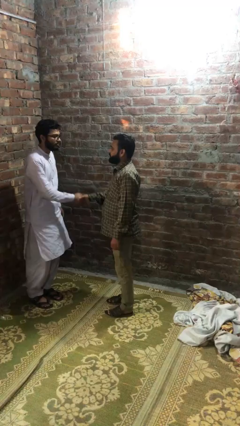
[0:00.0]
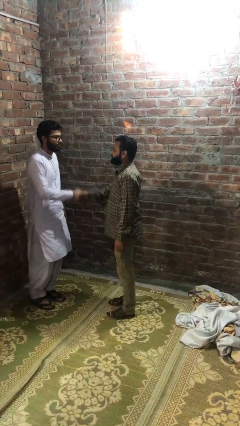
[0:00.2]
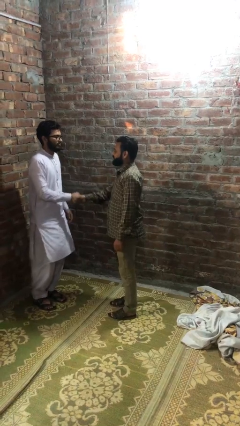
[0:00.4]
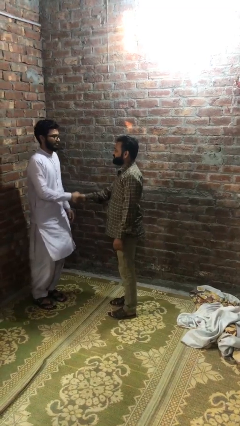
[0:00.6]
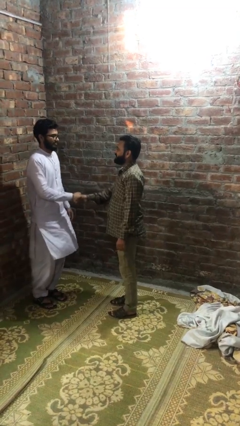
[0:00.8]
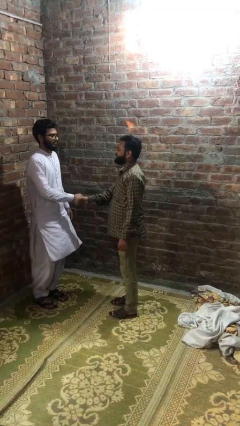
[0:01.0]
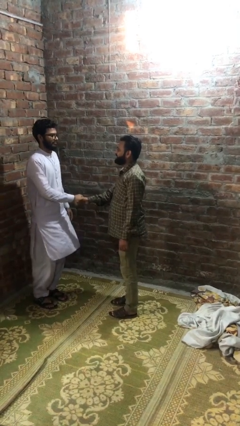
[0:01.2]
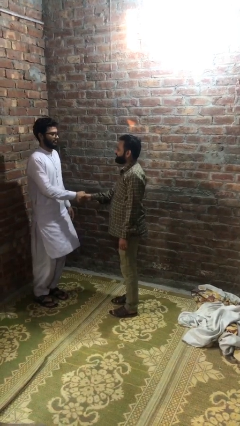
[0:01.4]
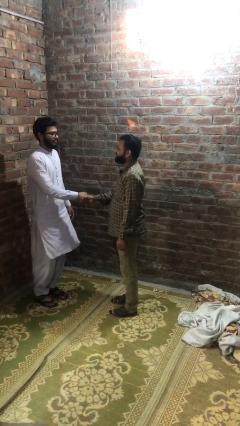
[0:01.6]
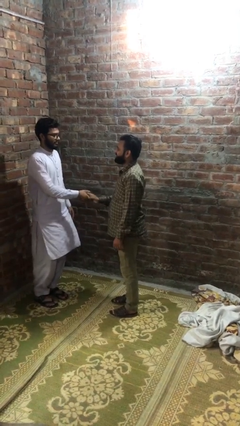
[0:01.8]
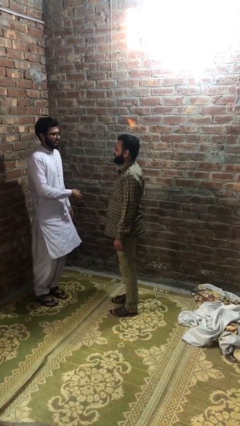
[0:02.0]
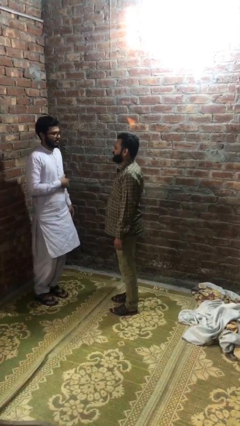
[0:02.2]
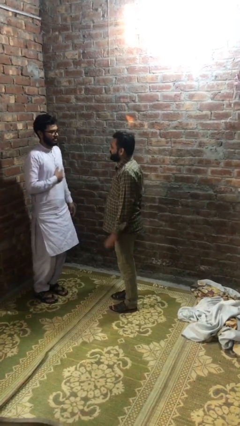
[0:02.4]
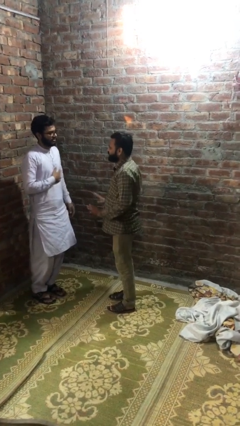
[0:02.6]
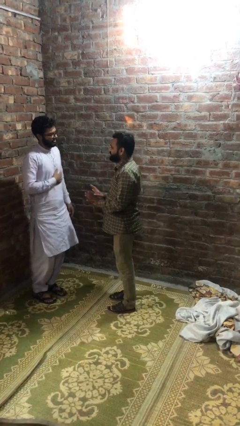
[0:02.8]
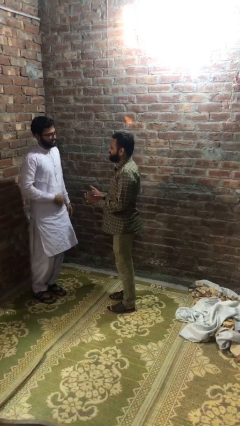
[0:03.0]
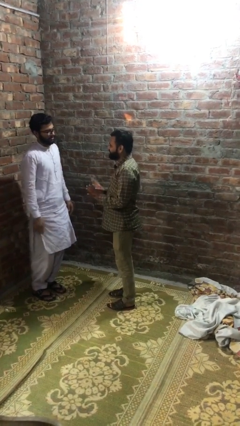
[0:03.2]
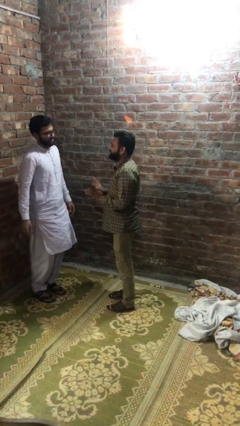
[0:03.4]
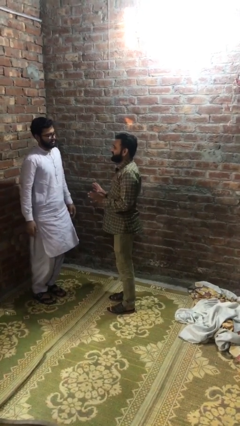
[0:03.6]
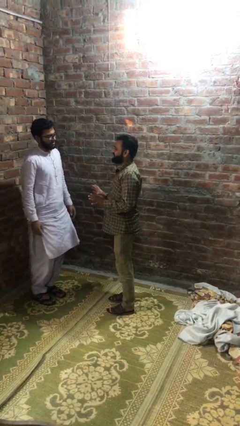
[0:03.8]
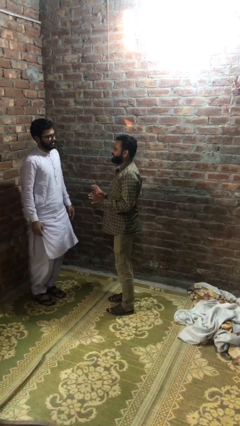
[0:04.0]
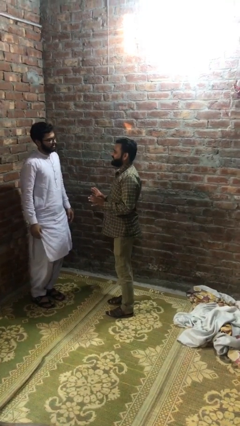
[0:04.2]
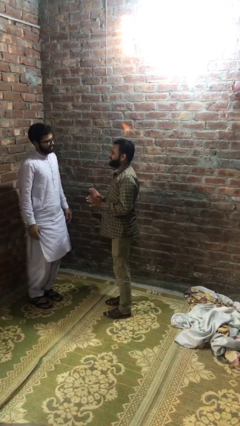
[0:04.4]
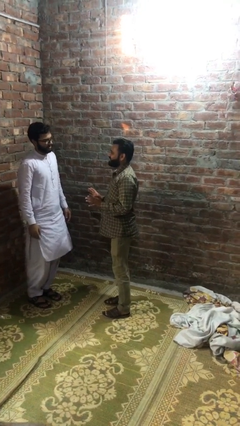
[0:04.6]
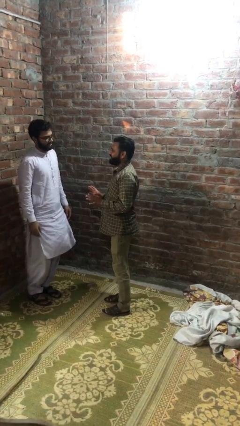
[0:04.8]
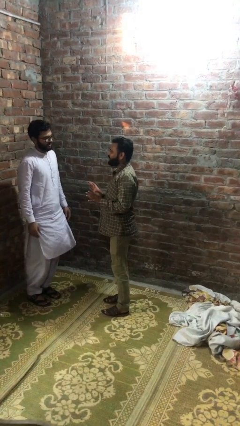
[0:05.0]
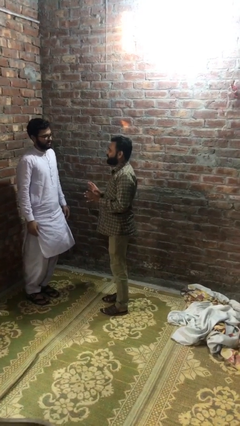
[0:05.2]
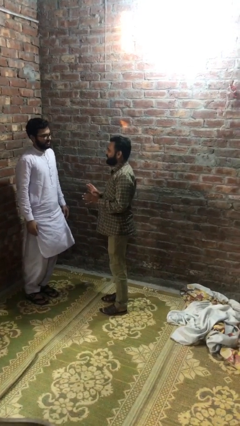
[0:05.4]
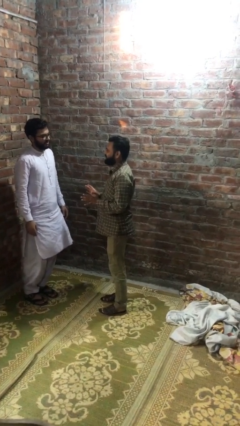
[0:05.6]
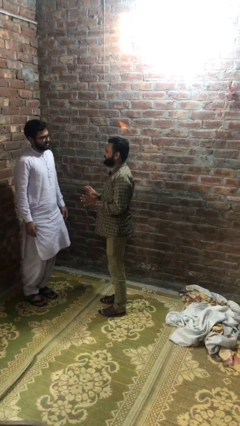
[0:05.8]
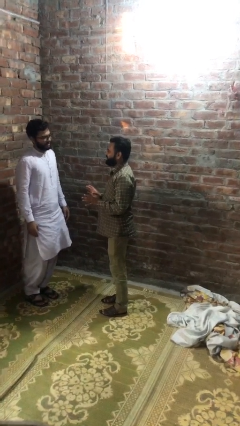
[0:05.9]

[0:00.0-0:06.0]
person shakes hand

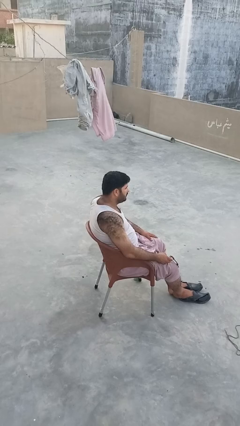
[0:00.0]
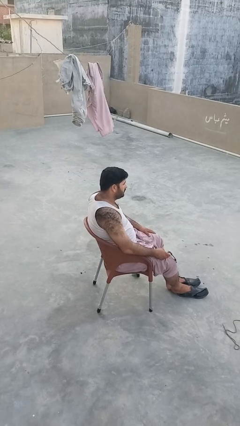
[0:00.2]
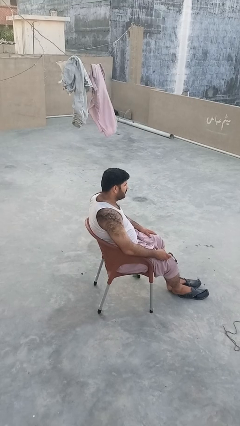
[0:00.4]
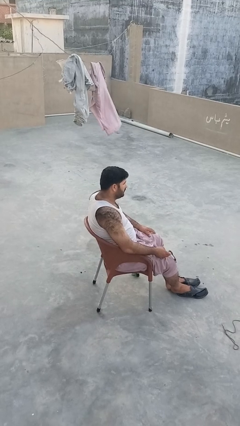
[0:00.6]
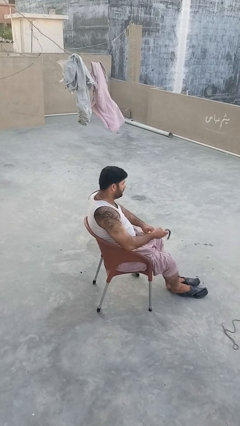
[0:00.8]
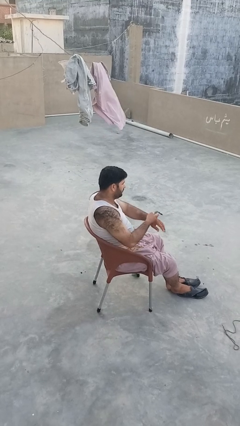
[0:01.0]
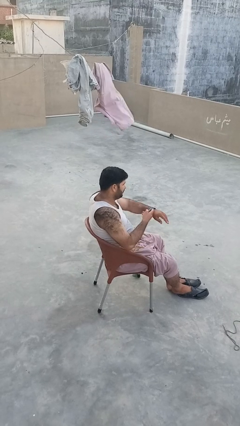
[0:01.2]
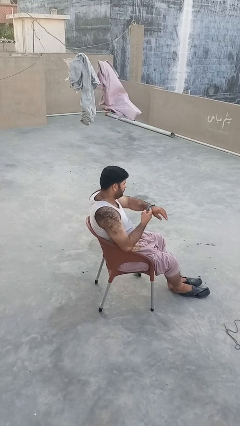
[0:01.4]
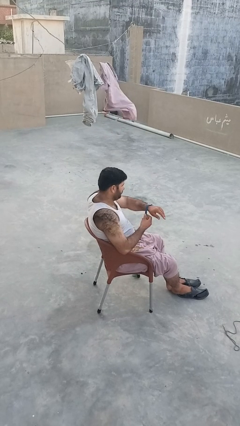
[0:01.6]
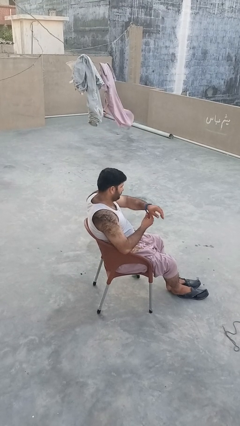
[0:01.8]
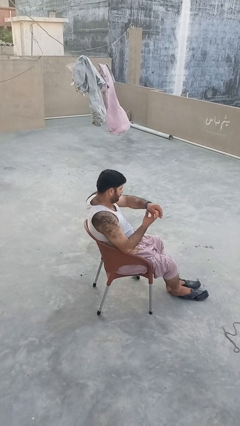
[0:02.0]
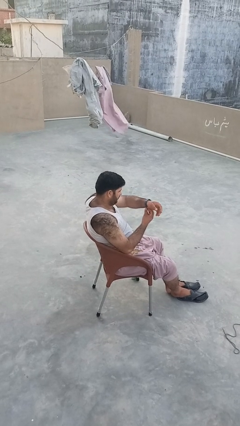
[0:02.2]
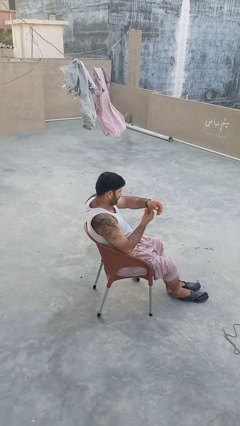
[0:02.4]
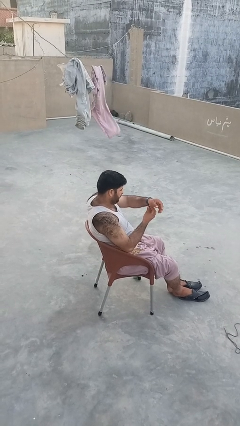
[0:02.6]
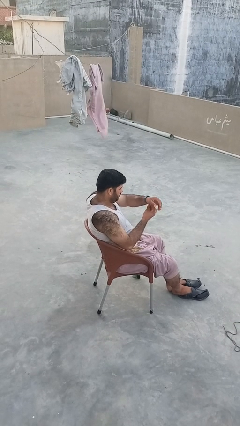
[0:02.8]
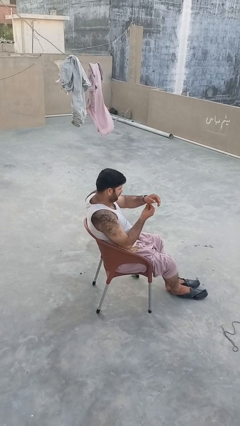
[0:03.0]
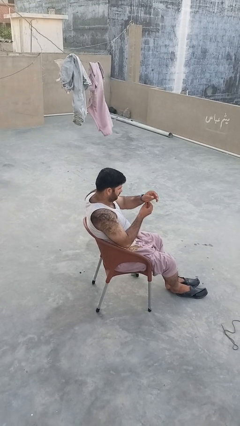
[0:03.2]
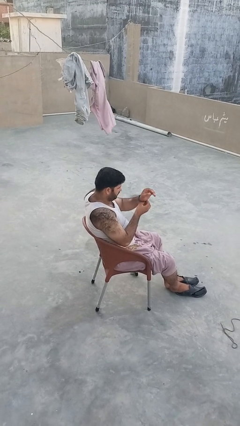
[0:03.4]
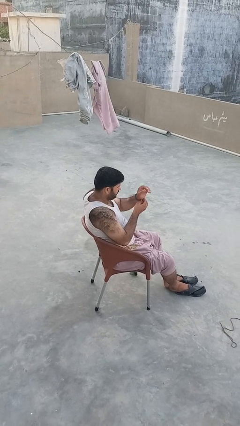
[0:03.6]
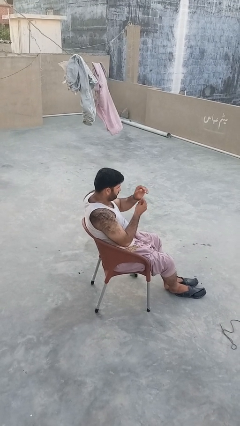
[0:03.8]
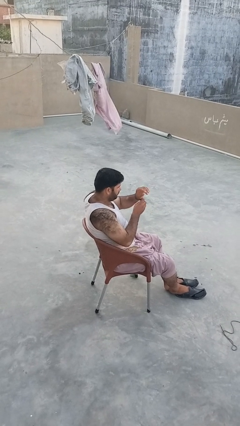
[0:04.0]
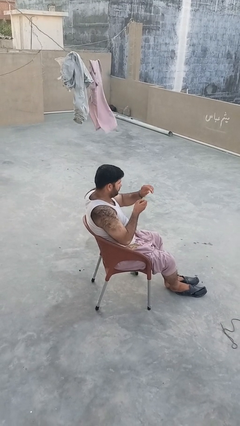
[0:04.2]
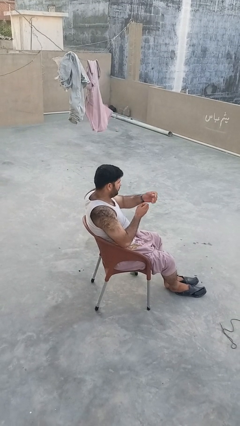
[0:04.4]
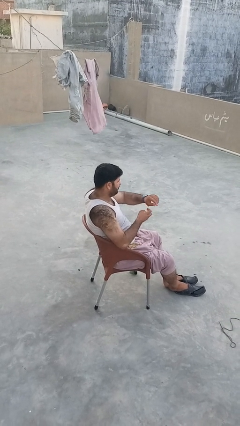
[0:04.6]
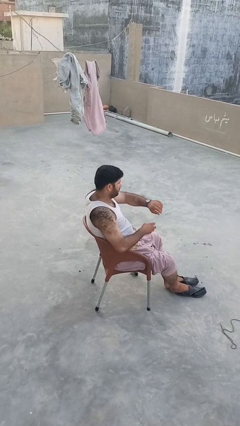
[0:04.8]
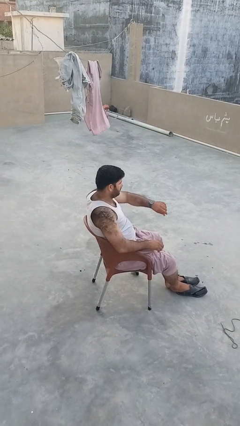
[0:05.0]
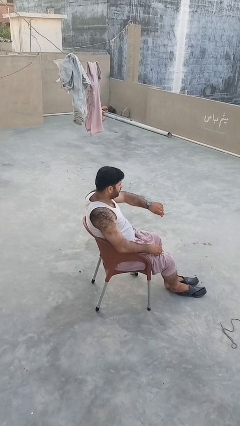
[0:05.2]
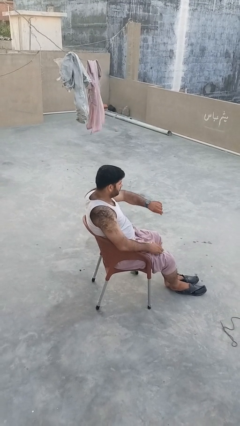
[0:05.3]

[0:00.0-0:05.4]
person puts on wristwatch

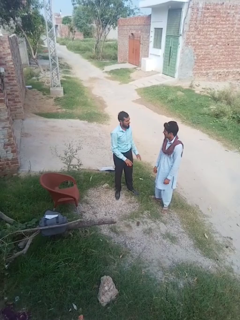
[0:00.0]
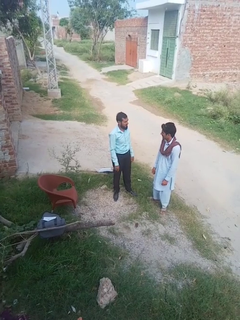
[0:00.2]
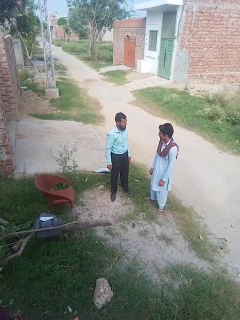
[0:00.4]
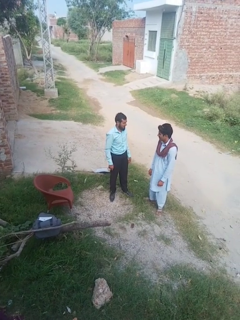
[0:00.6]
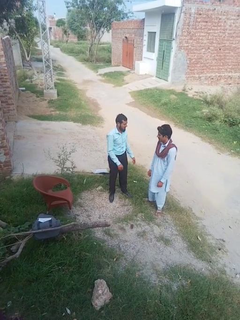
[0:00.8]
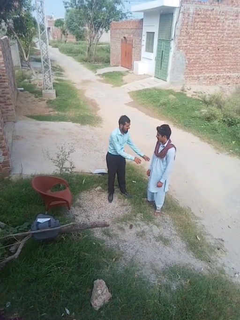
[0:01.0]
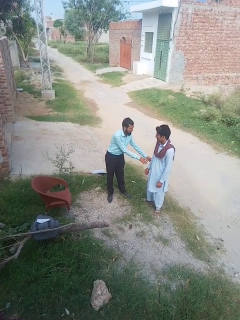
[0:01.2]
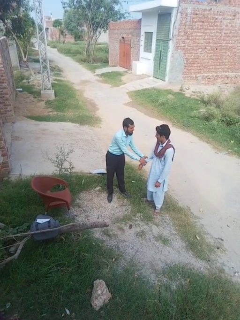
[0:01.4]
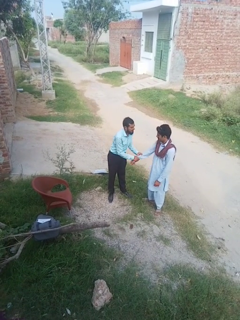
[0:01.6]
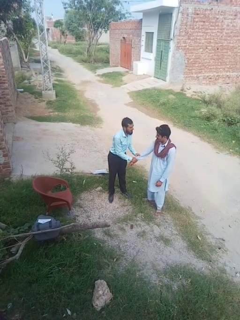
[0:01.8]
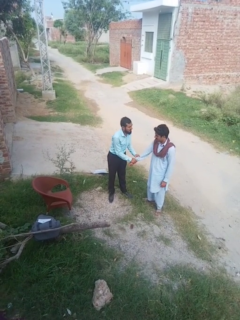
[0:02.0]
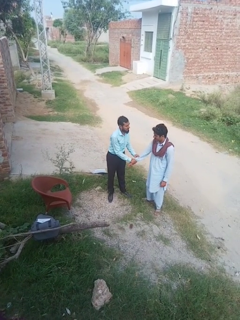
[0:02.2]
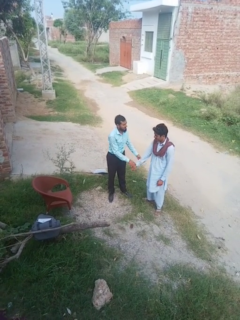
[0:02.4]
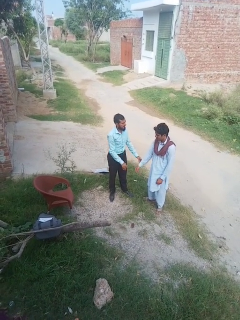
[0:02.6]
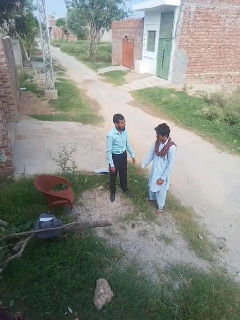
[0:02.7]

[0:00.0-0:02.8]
person grabs person by forearm

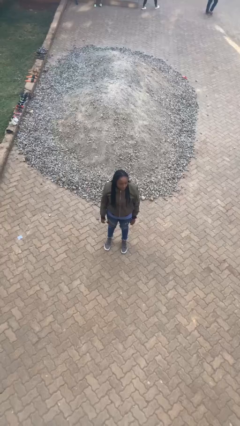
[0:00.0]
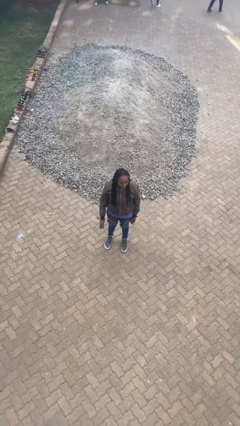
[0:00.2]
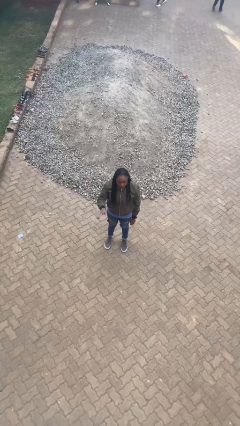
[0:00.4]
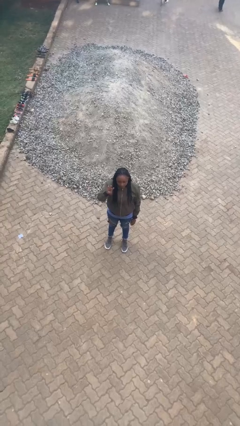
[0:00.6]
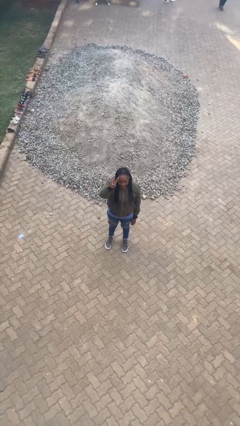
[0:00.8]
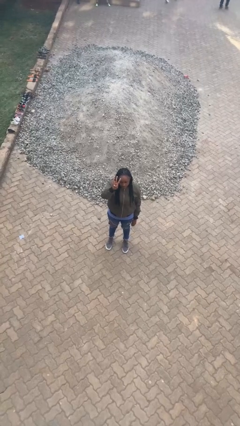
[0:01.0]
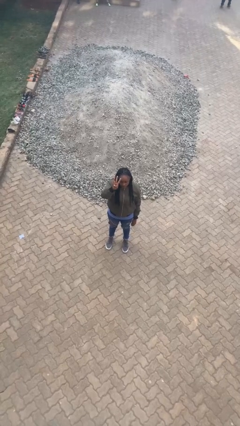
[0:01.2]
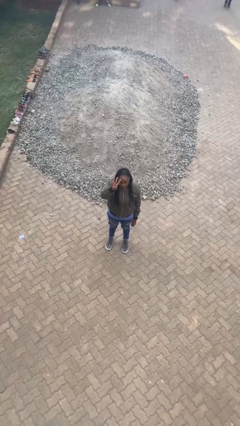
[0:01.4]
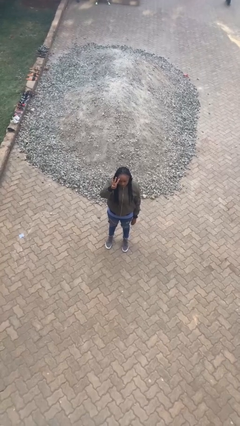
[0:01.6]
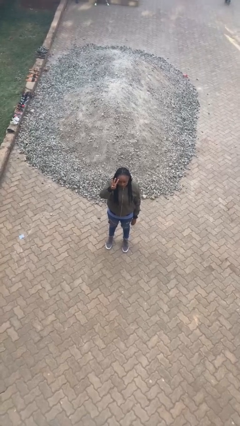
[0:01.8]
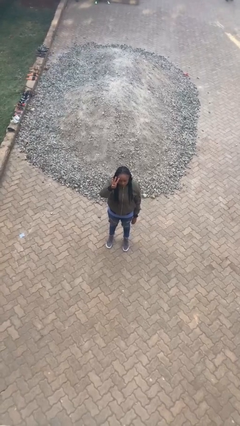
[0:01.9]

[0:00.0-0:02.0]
person gestures number three

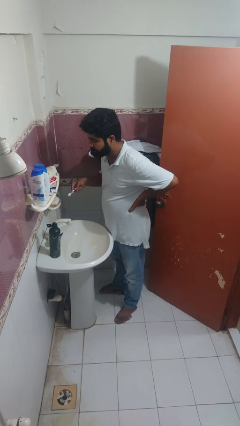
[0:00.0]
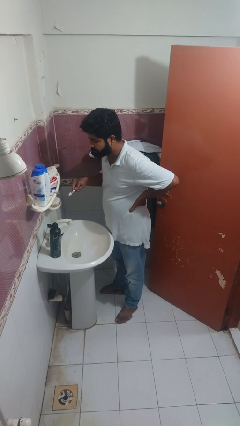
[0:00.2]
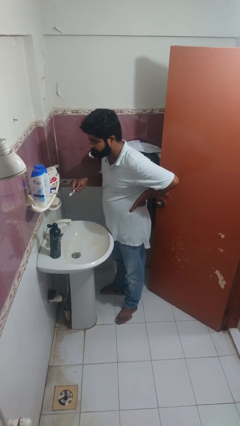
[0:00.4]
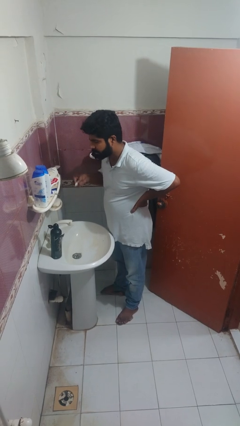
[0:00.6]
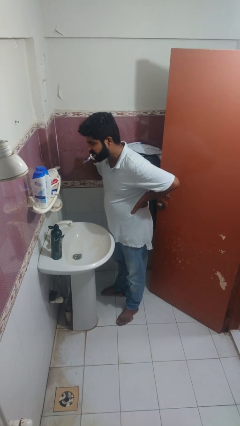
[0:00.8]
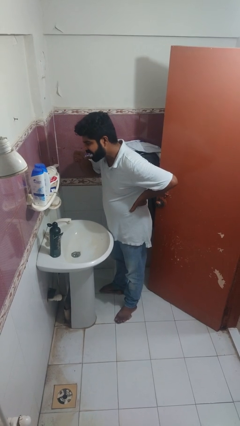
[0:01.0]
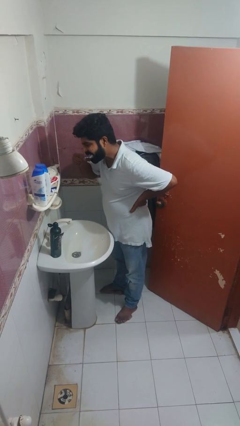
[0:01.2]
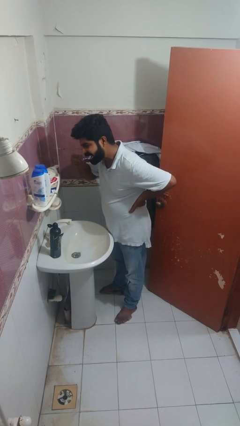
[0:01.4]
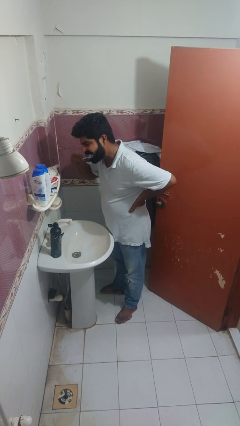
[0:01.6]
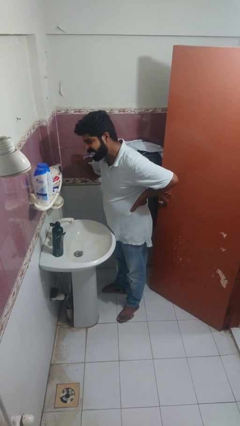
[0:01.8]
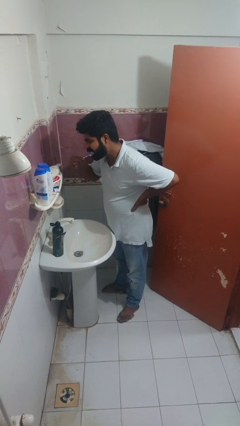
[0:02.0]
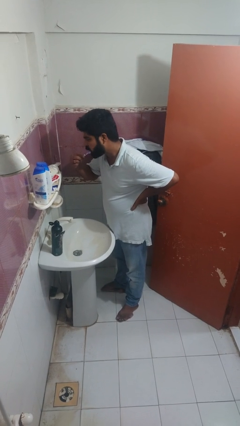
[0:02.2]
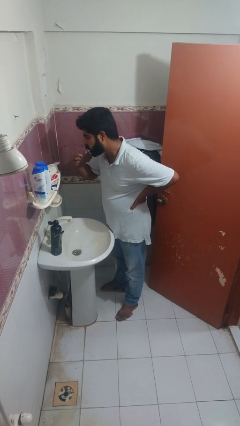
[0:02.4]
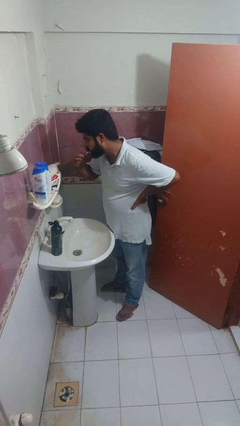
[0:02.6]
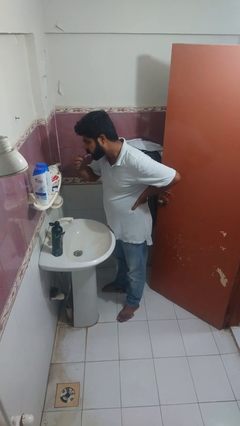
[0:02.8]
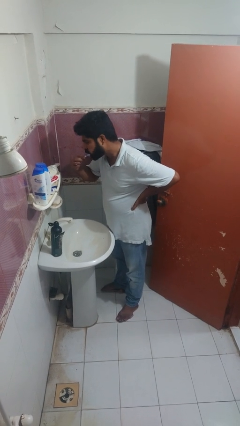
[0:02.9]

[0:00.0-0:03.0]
person brushes teeth
